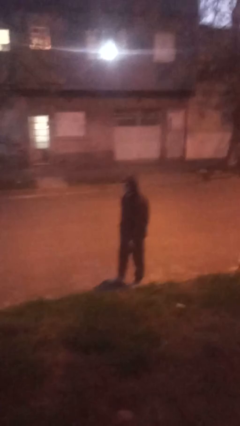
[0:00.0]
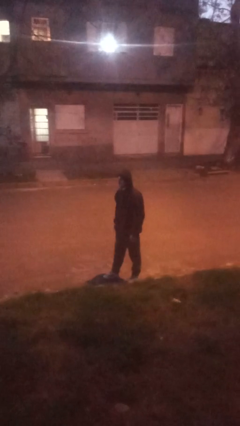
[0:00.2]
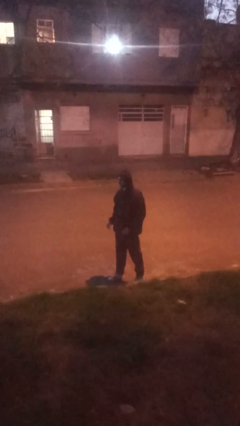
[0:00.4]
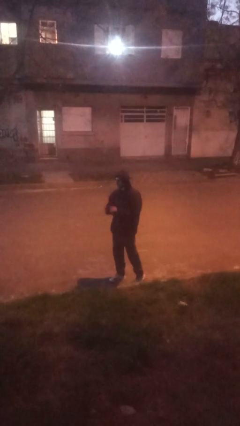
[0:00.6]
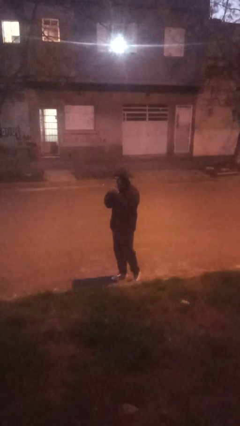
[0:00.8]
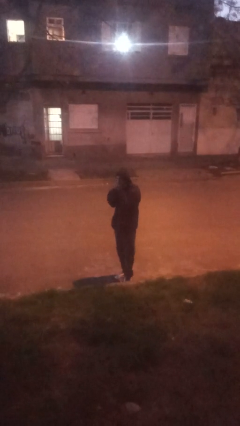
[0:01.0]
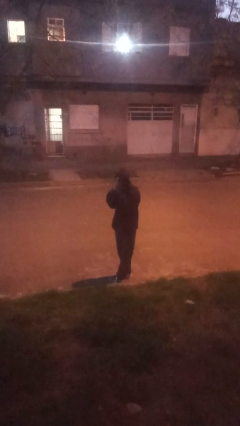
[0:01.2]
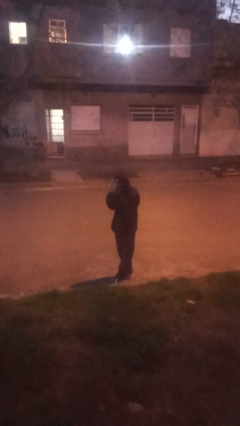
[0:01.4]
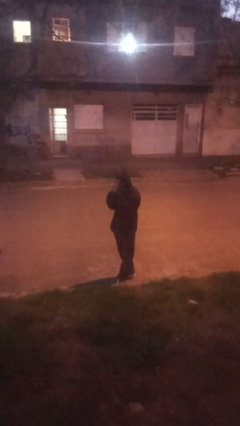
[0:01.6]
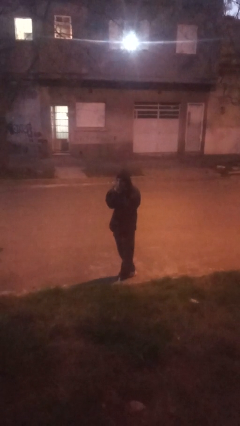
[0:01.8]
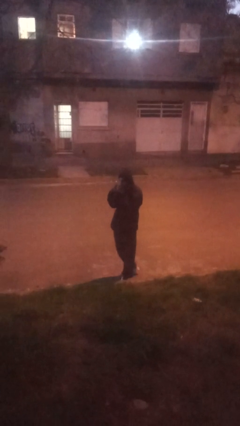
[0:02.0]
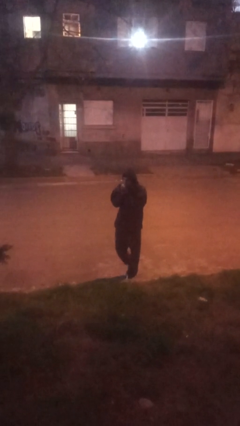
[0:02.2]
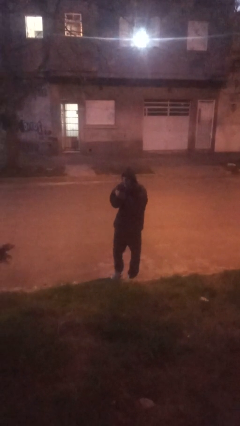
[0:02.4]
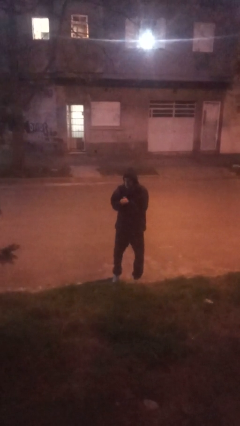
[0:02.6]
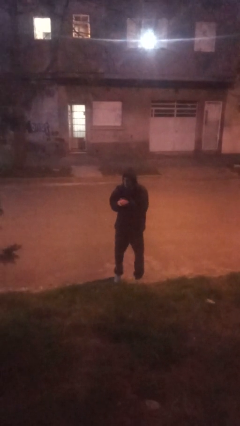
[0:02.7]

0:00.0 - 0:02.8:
person blows into hands

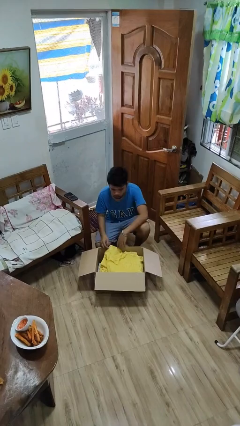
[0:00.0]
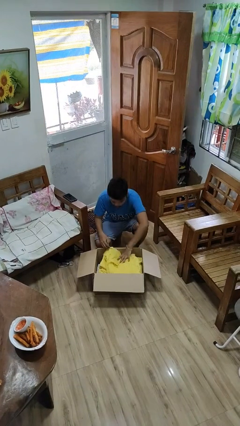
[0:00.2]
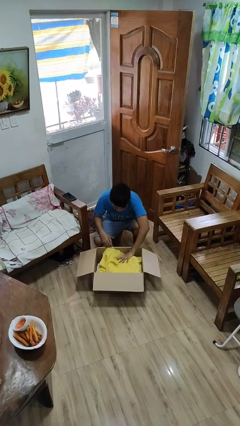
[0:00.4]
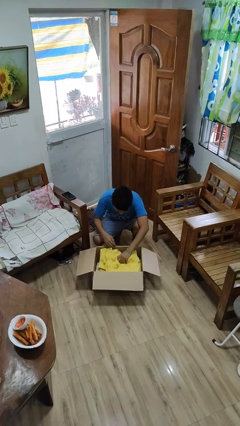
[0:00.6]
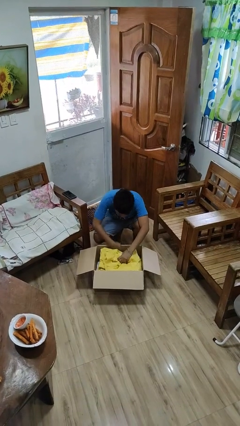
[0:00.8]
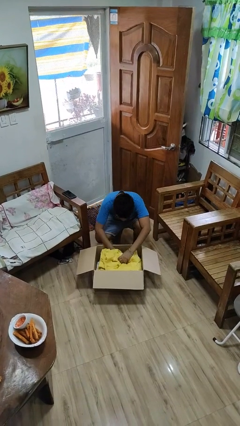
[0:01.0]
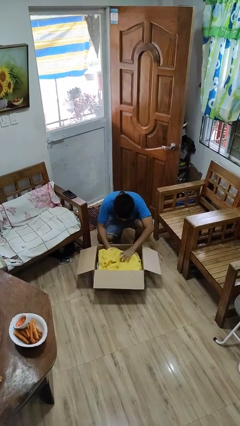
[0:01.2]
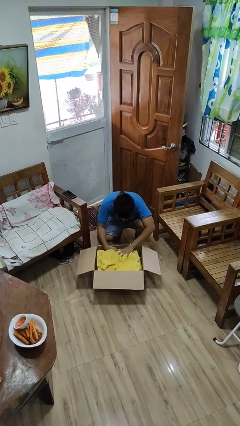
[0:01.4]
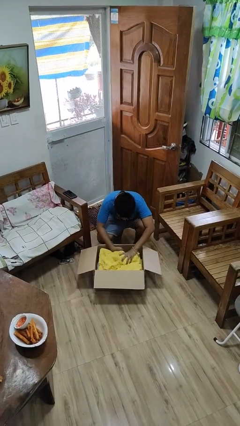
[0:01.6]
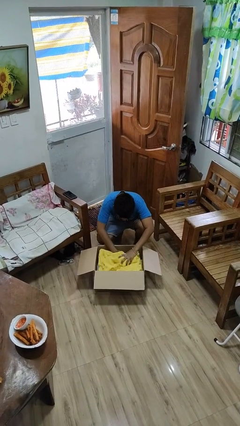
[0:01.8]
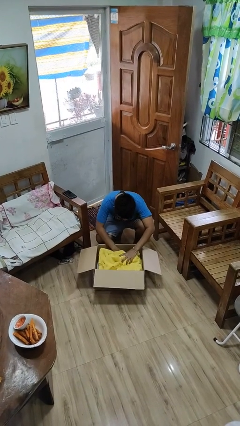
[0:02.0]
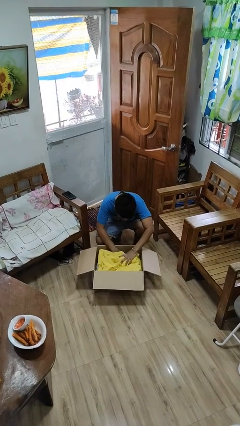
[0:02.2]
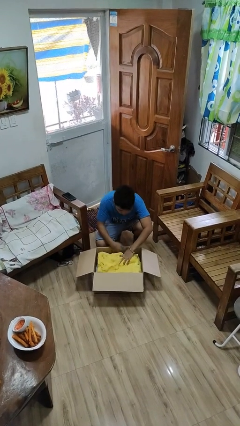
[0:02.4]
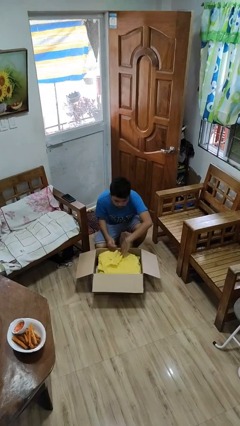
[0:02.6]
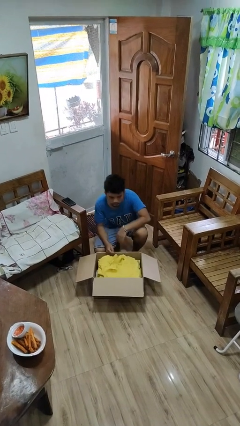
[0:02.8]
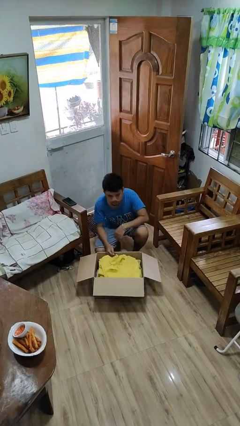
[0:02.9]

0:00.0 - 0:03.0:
person searches in box

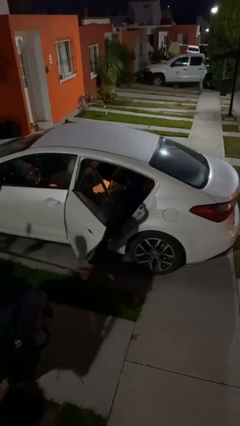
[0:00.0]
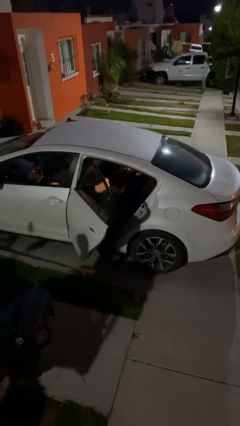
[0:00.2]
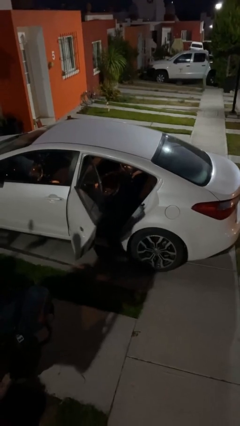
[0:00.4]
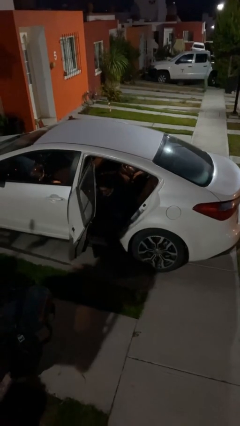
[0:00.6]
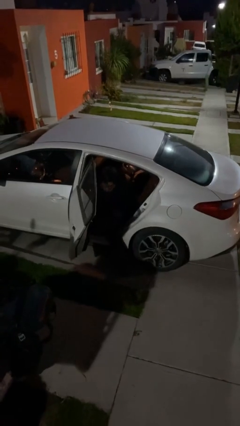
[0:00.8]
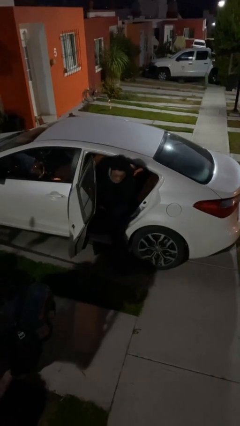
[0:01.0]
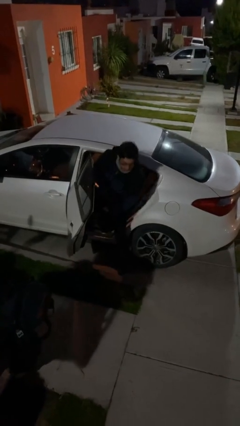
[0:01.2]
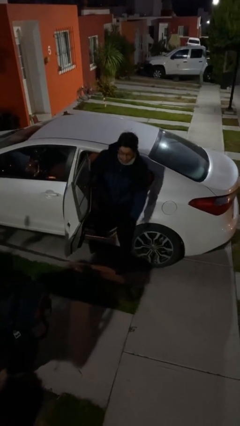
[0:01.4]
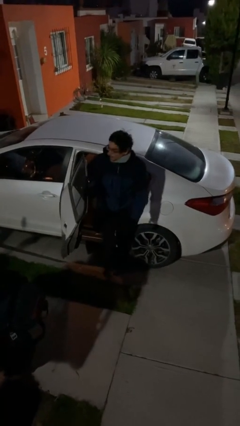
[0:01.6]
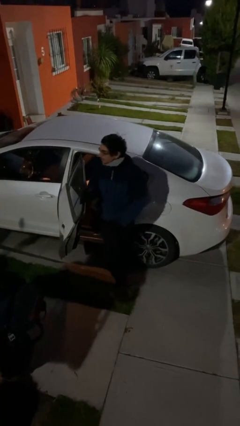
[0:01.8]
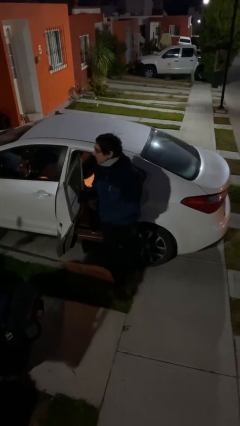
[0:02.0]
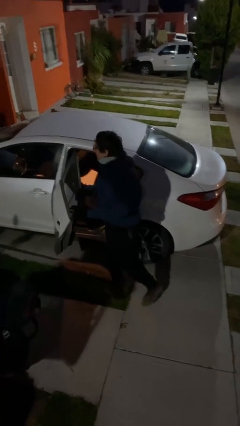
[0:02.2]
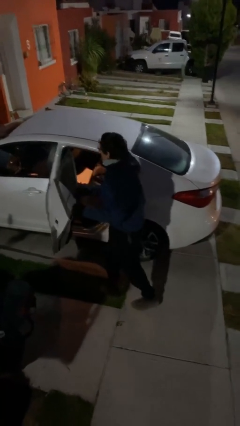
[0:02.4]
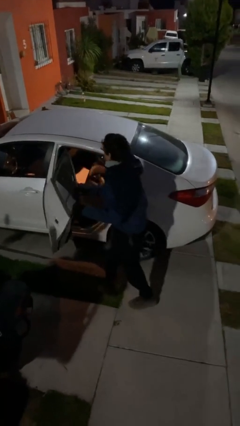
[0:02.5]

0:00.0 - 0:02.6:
person exits car

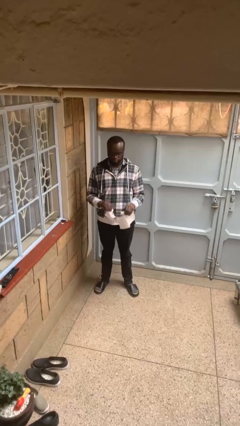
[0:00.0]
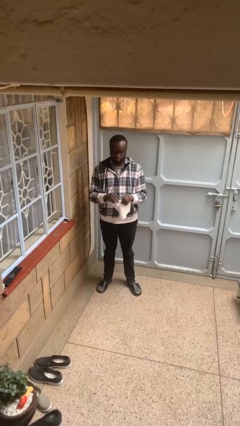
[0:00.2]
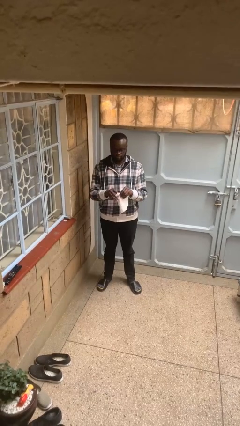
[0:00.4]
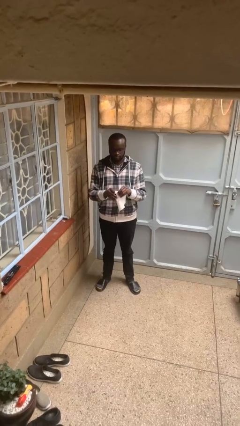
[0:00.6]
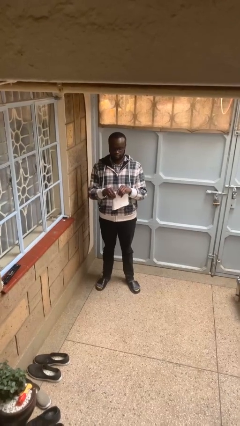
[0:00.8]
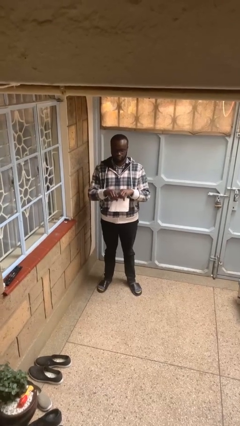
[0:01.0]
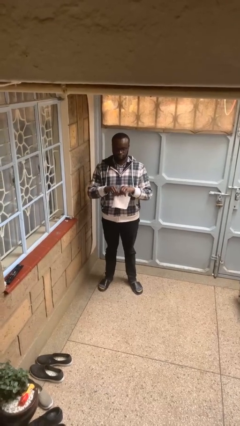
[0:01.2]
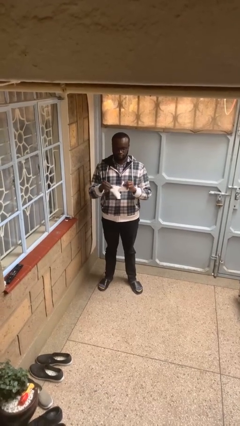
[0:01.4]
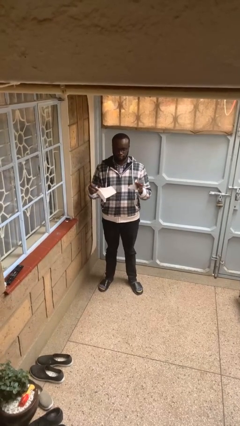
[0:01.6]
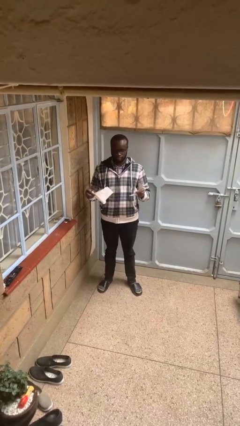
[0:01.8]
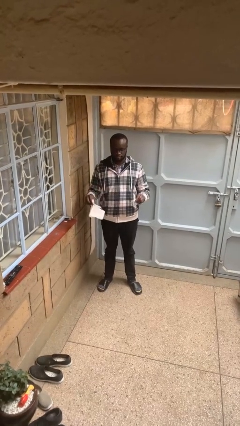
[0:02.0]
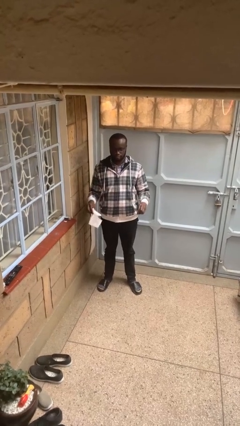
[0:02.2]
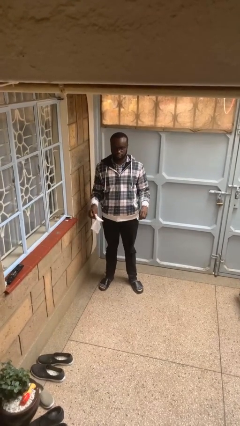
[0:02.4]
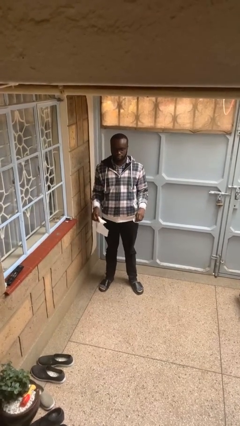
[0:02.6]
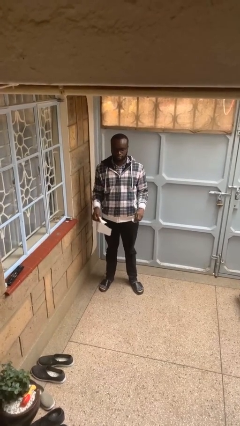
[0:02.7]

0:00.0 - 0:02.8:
person tears paper

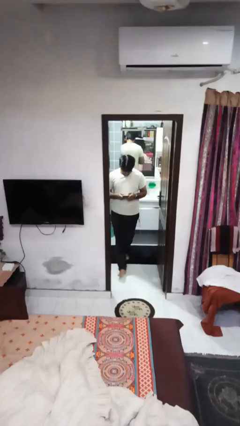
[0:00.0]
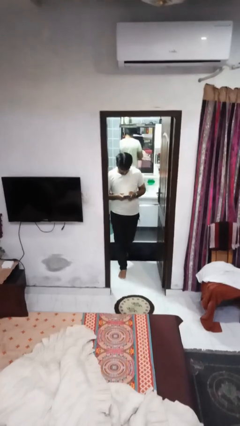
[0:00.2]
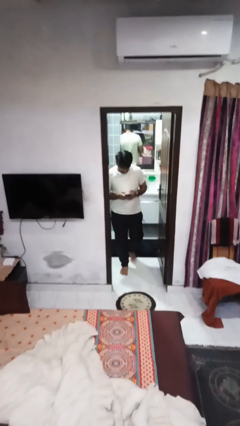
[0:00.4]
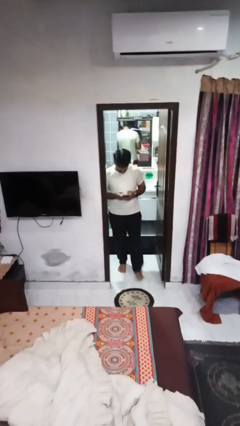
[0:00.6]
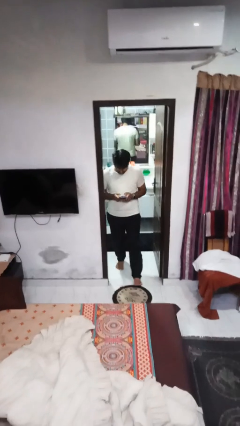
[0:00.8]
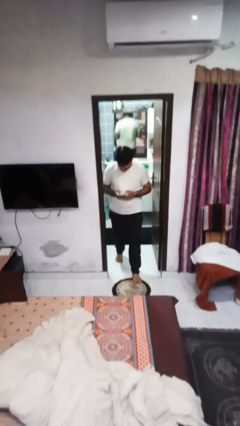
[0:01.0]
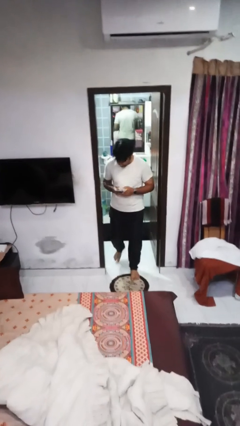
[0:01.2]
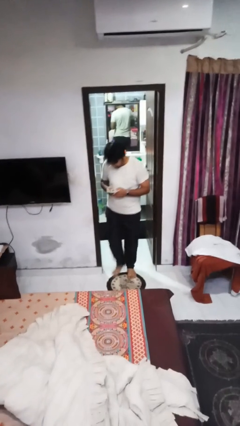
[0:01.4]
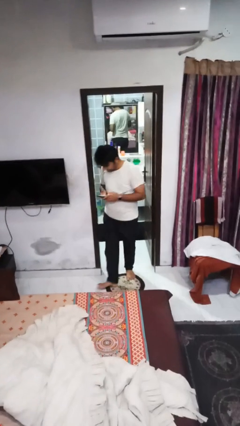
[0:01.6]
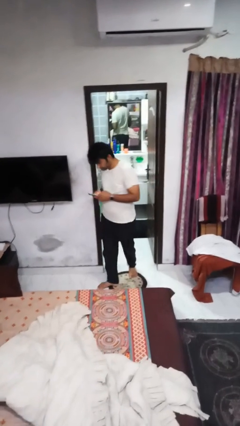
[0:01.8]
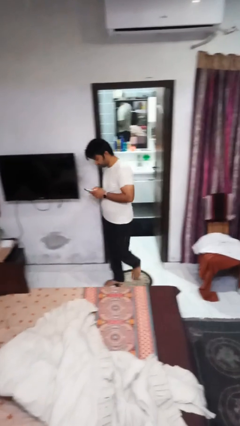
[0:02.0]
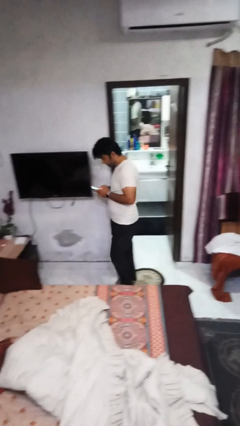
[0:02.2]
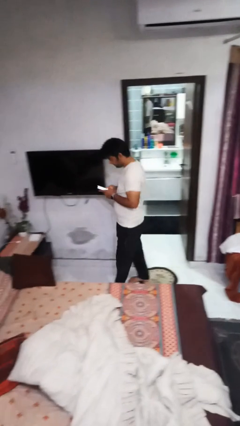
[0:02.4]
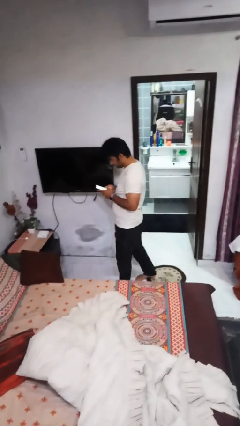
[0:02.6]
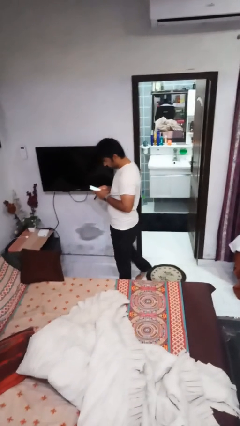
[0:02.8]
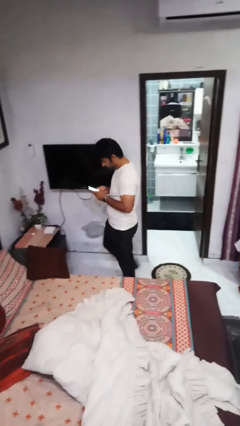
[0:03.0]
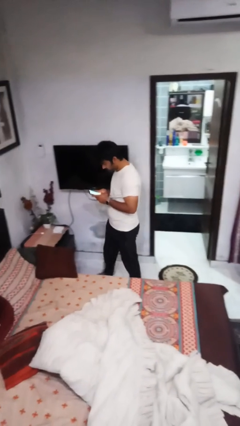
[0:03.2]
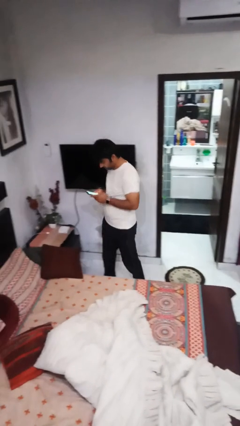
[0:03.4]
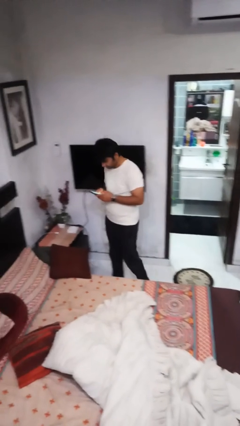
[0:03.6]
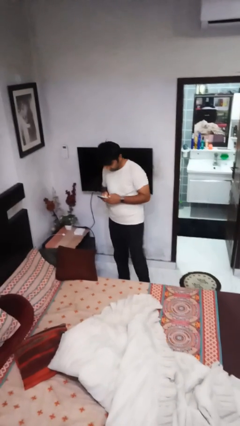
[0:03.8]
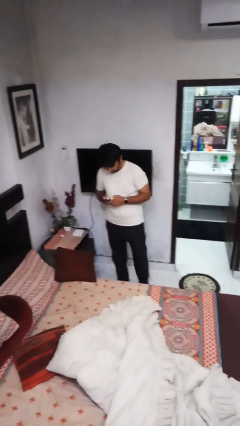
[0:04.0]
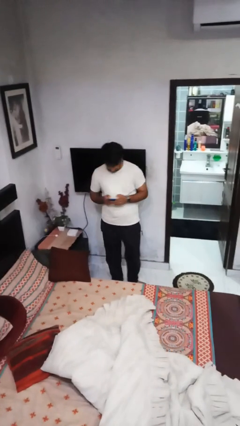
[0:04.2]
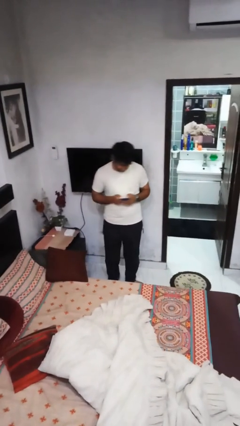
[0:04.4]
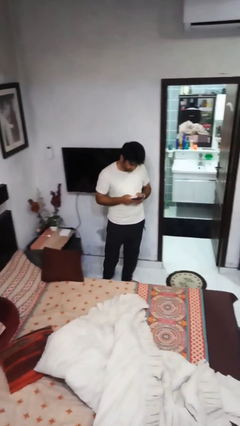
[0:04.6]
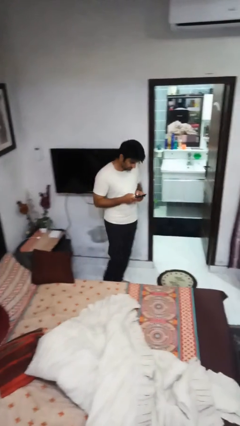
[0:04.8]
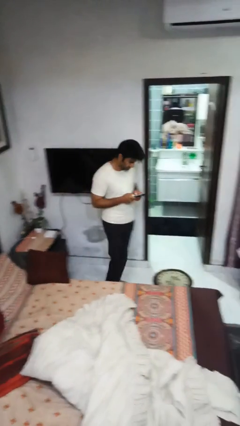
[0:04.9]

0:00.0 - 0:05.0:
person enters scene through structure

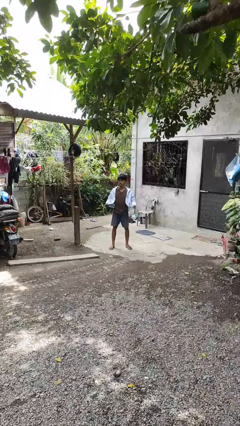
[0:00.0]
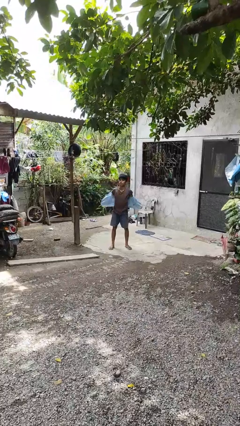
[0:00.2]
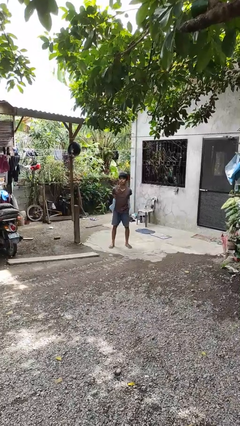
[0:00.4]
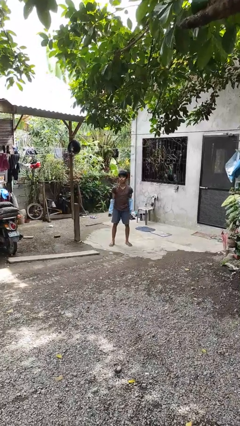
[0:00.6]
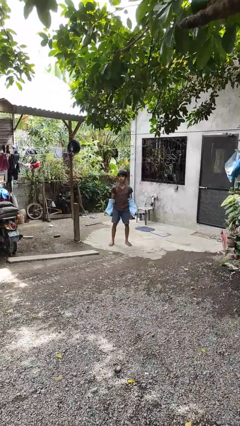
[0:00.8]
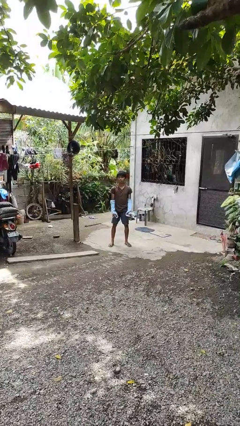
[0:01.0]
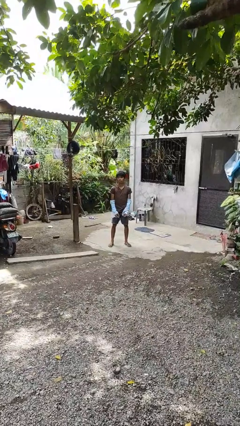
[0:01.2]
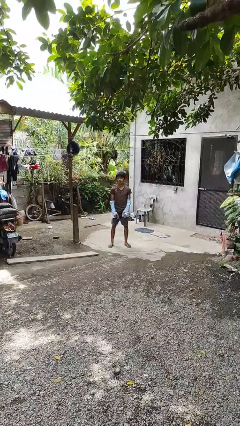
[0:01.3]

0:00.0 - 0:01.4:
person takes off jacket
